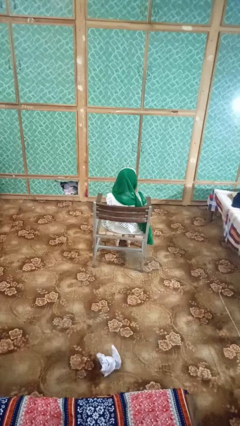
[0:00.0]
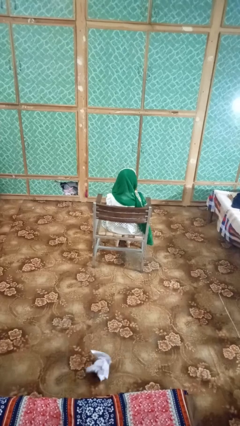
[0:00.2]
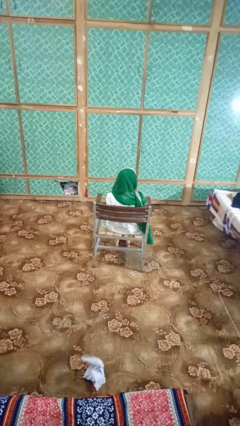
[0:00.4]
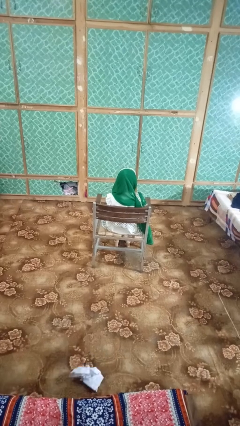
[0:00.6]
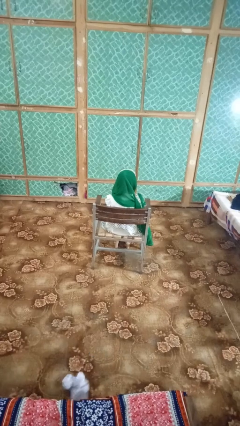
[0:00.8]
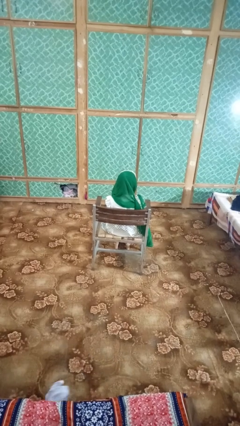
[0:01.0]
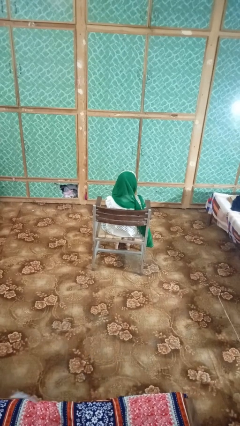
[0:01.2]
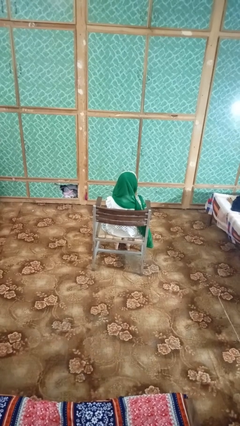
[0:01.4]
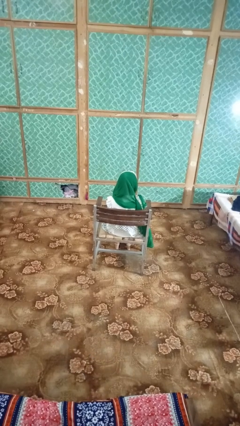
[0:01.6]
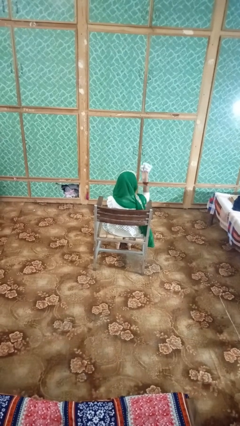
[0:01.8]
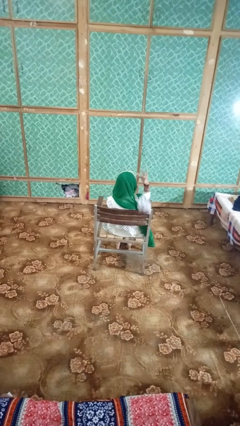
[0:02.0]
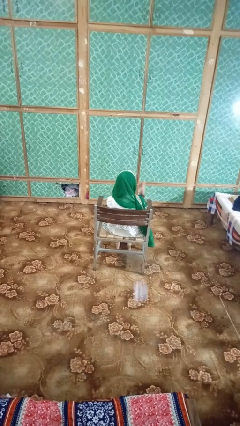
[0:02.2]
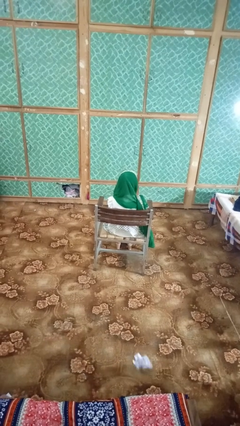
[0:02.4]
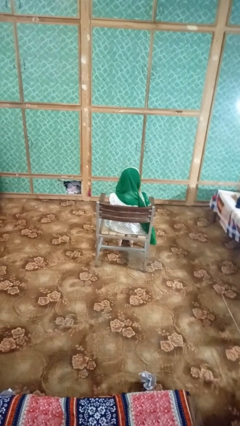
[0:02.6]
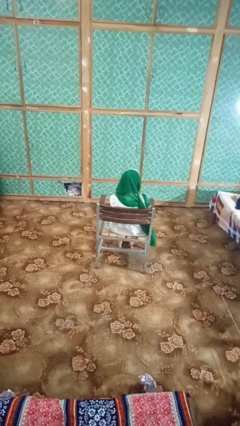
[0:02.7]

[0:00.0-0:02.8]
person crumples paper

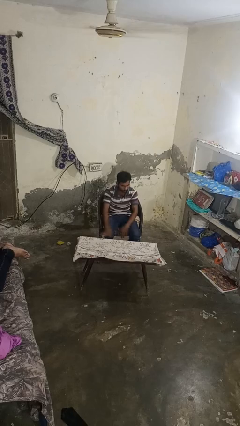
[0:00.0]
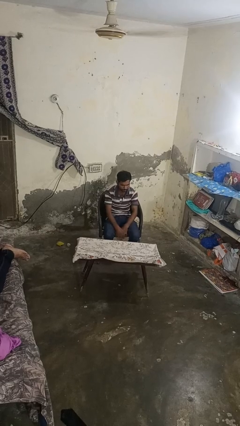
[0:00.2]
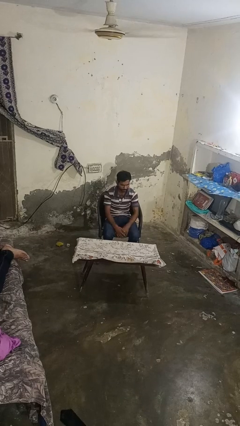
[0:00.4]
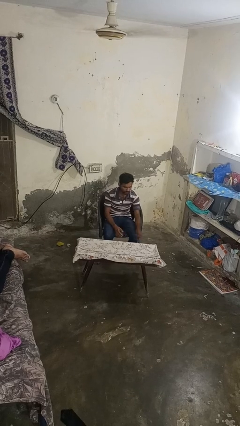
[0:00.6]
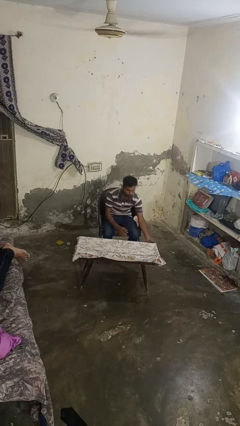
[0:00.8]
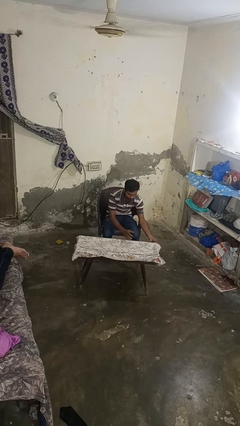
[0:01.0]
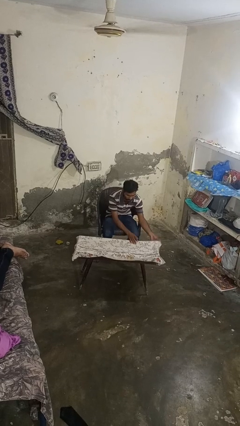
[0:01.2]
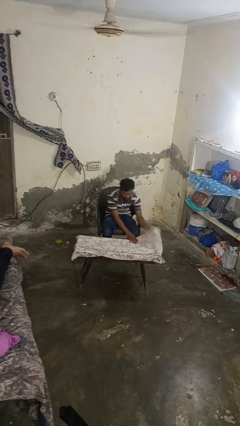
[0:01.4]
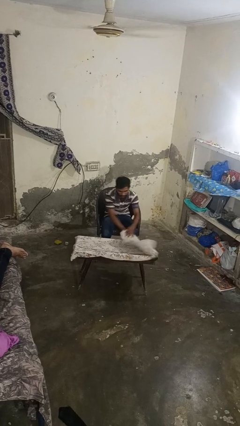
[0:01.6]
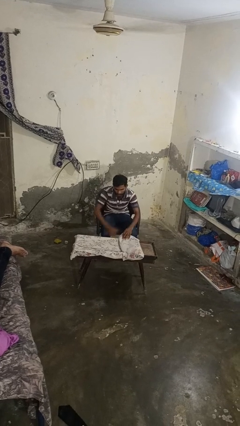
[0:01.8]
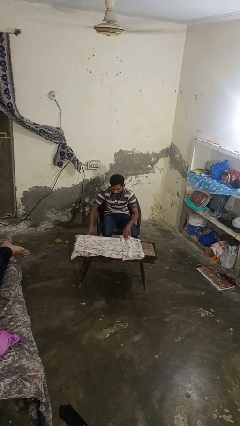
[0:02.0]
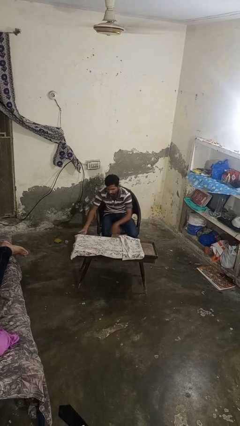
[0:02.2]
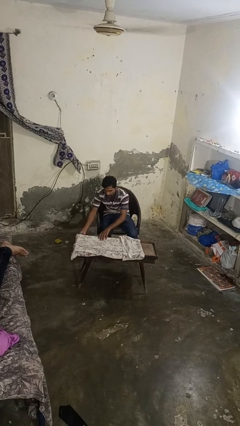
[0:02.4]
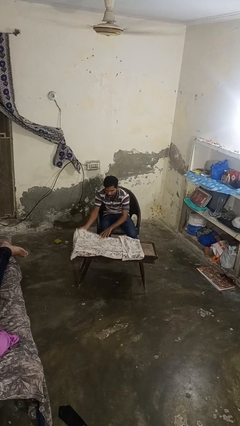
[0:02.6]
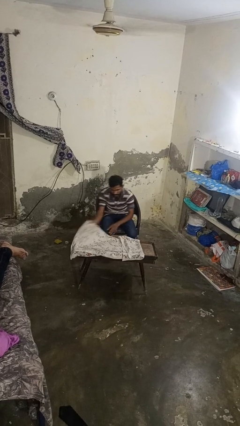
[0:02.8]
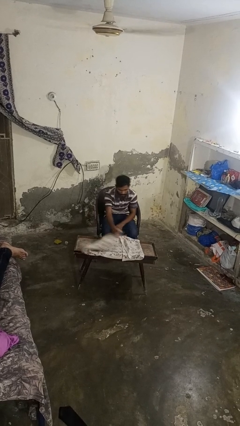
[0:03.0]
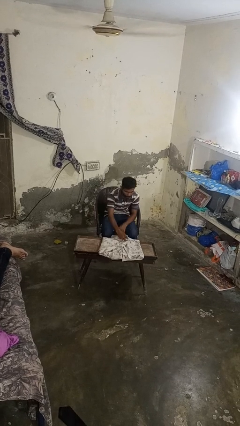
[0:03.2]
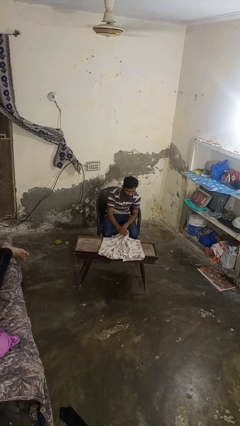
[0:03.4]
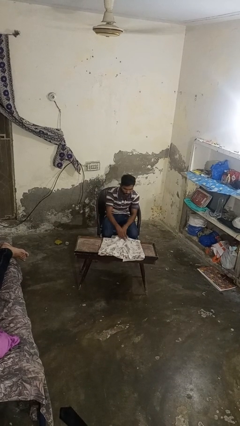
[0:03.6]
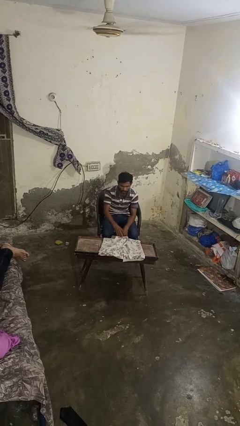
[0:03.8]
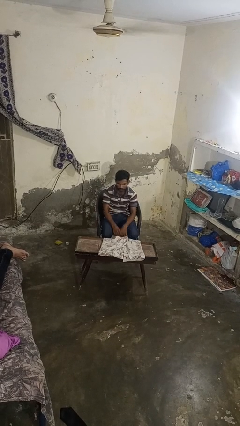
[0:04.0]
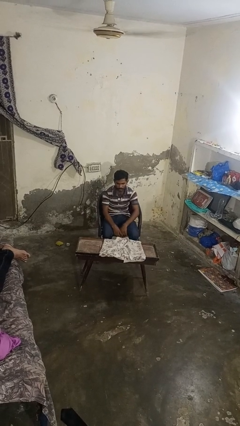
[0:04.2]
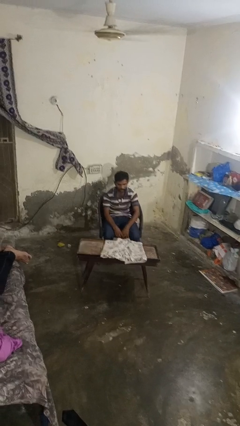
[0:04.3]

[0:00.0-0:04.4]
person folds tablecloth

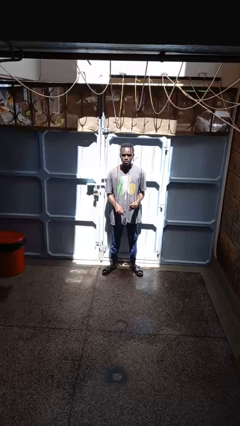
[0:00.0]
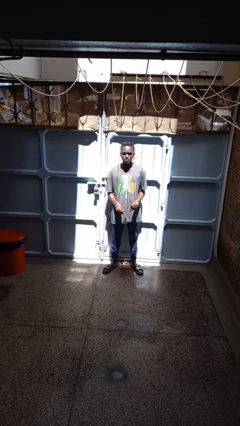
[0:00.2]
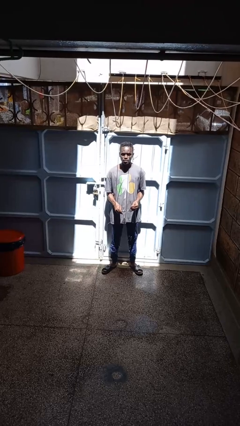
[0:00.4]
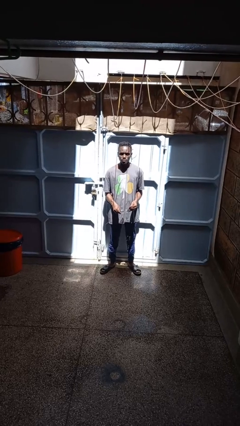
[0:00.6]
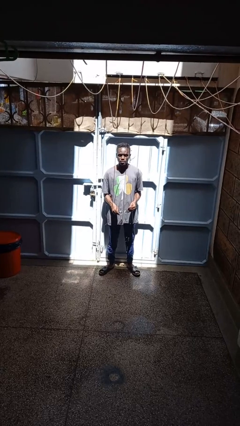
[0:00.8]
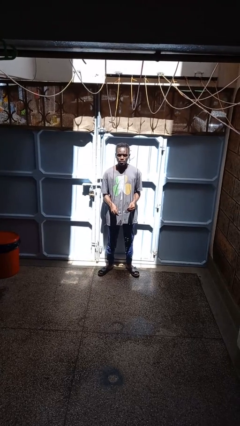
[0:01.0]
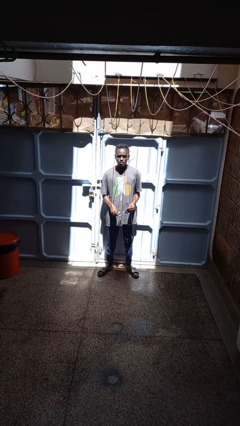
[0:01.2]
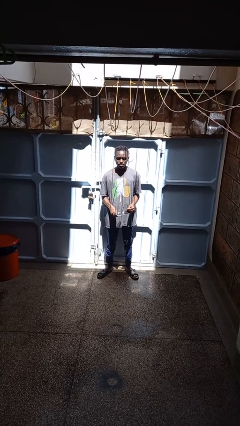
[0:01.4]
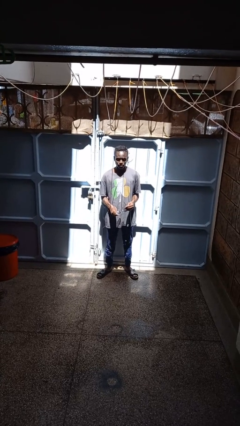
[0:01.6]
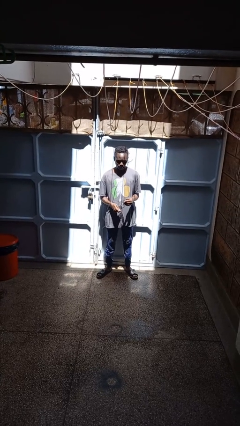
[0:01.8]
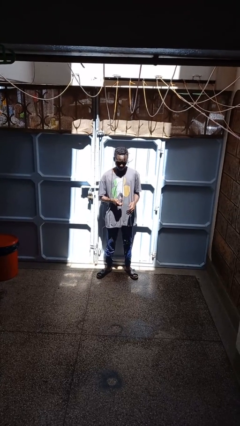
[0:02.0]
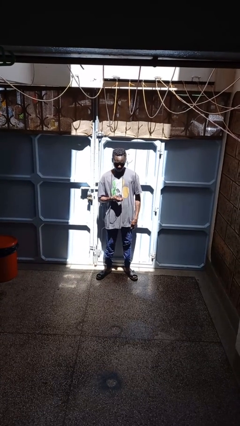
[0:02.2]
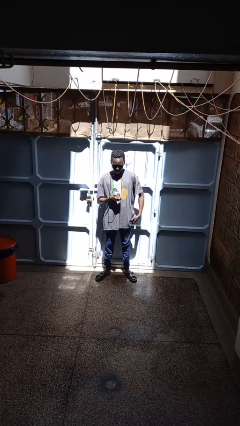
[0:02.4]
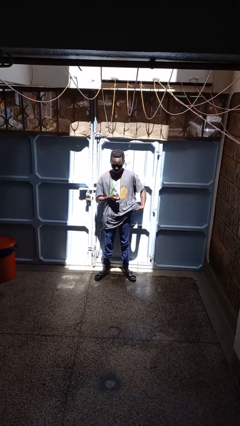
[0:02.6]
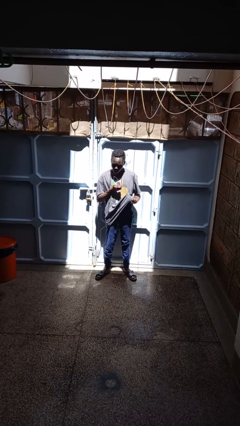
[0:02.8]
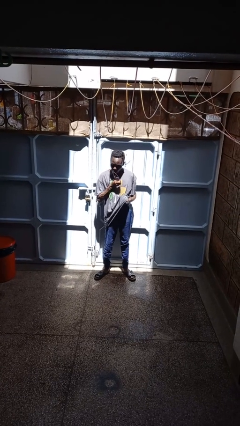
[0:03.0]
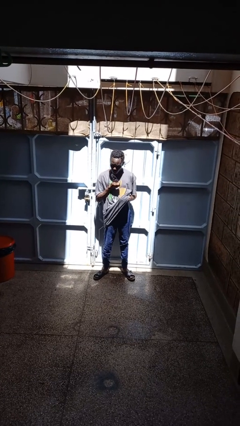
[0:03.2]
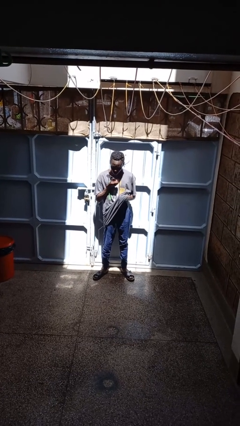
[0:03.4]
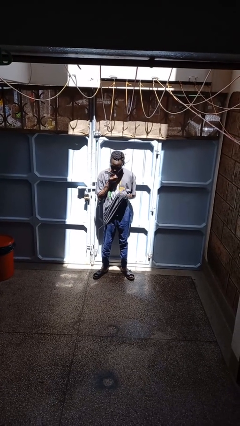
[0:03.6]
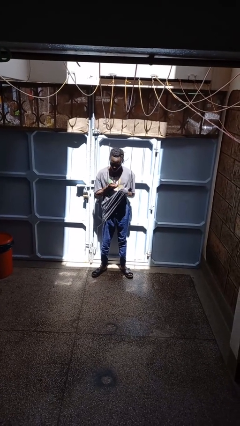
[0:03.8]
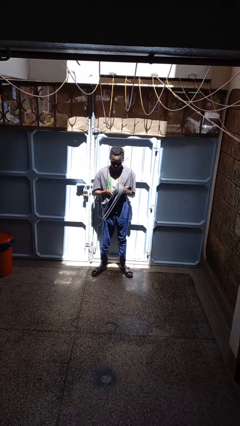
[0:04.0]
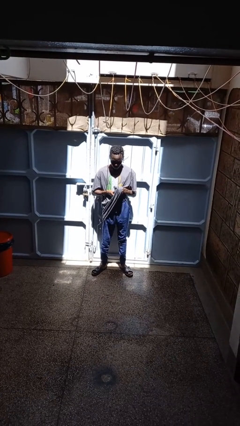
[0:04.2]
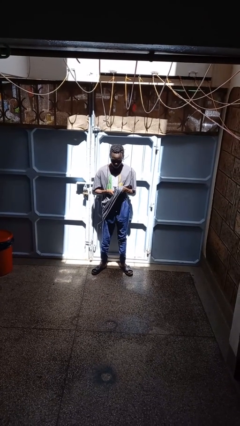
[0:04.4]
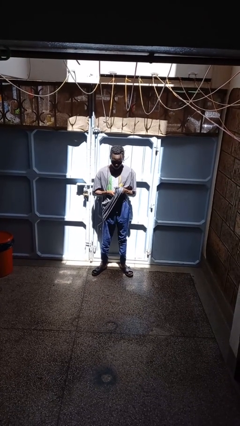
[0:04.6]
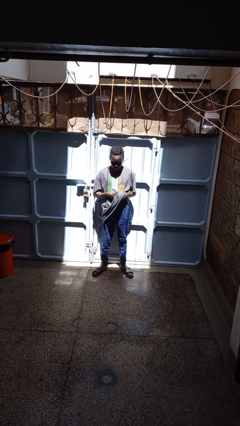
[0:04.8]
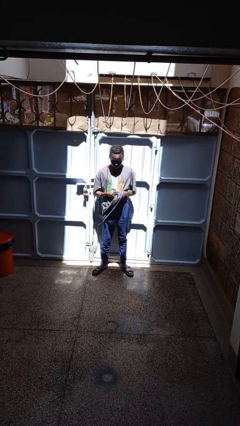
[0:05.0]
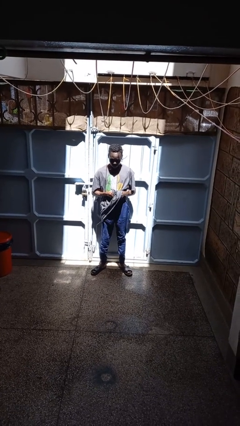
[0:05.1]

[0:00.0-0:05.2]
person cleans eyeglasses

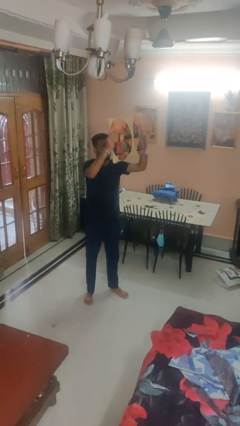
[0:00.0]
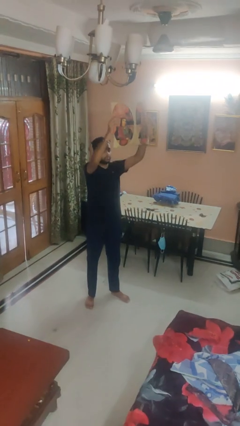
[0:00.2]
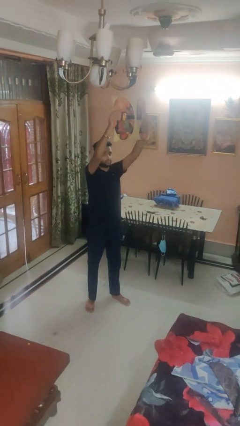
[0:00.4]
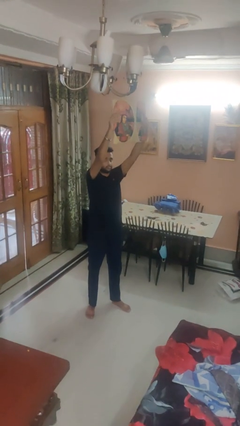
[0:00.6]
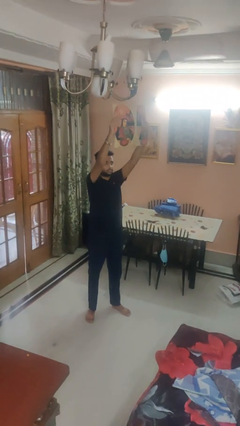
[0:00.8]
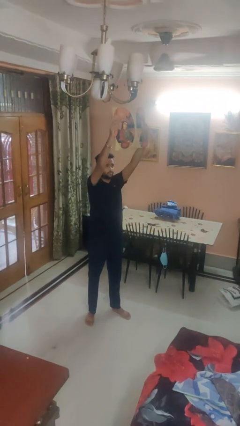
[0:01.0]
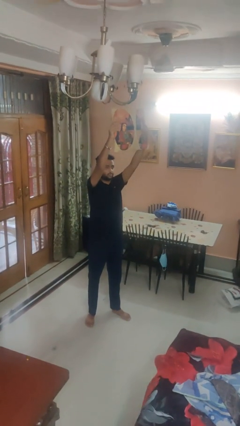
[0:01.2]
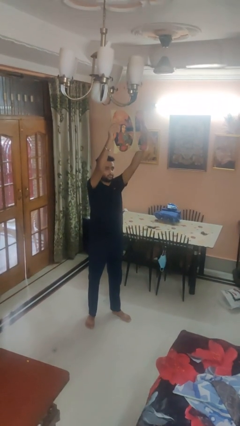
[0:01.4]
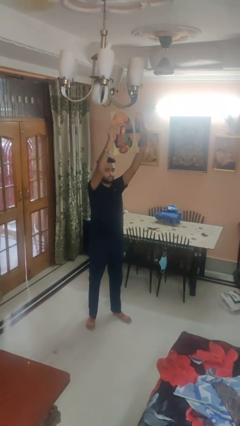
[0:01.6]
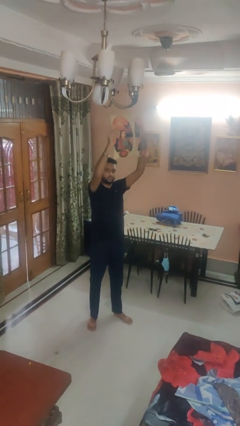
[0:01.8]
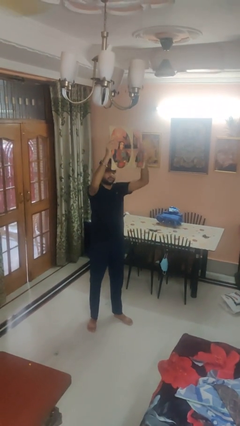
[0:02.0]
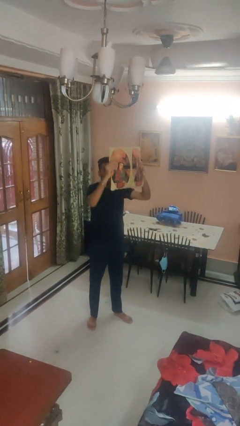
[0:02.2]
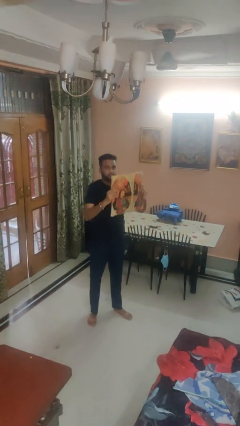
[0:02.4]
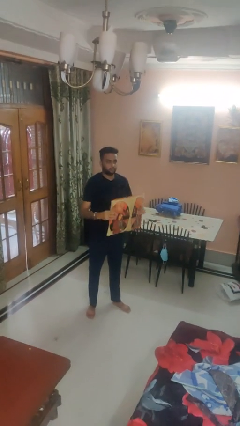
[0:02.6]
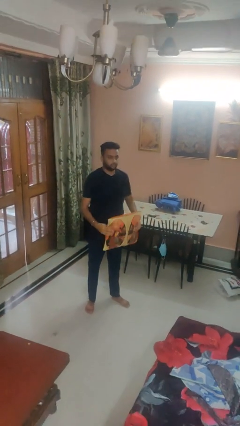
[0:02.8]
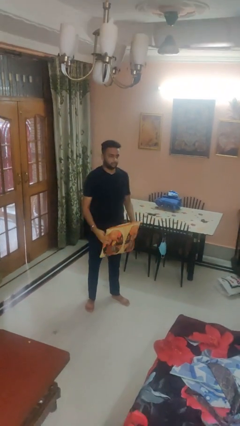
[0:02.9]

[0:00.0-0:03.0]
person holds object above head

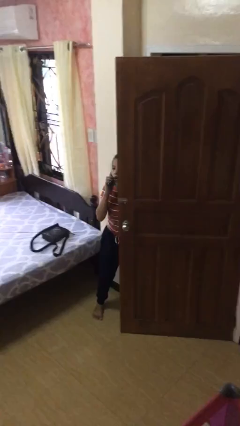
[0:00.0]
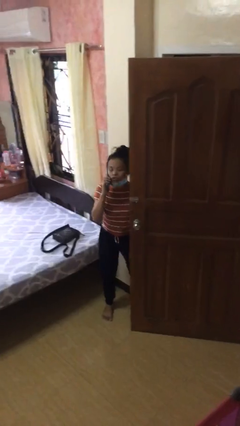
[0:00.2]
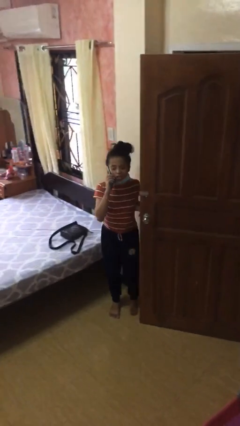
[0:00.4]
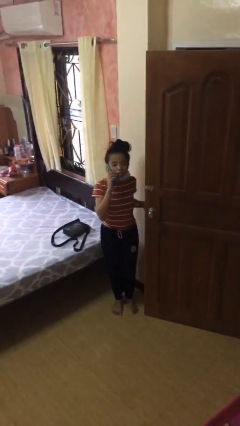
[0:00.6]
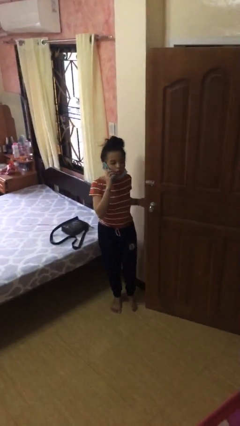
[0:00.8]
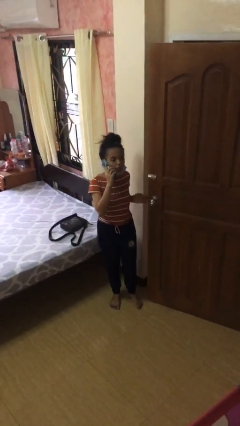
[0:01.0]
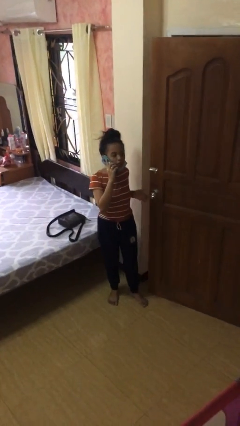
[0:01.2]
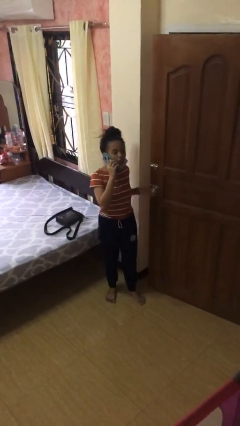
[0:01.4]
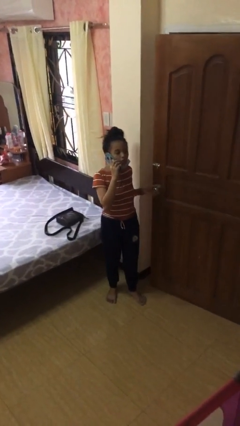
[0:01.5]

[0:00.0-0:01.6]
person enters scene through structure

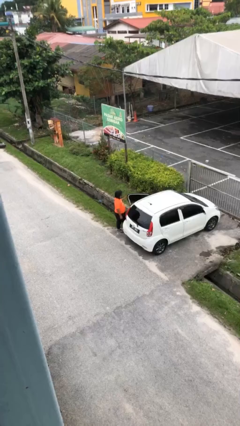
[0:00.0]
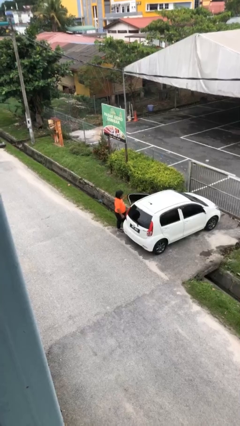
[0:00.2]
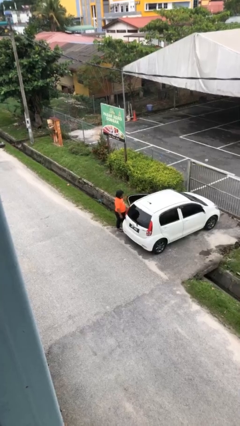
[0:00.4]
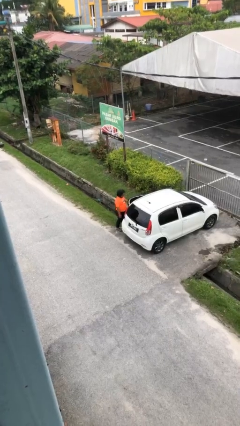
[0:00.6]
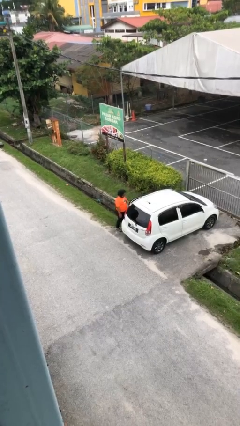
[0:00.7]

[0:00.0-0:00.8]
person closes car door
